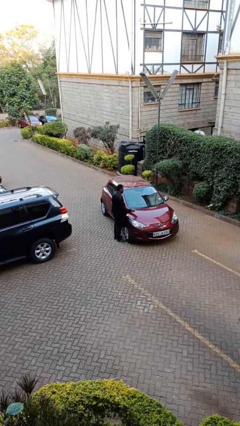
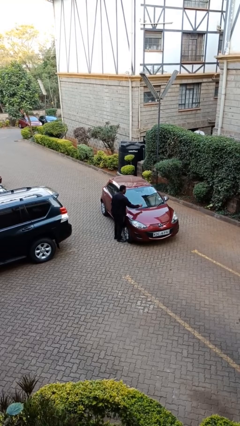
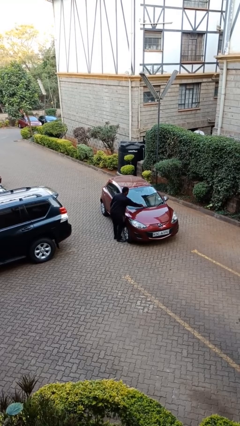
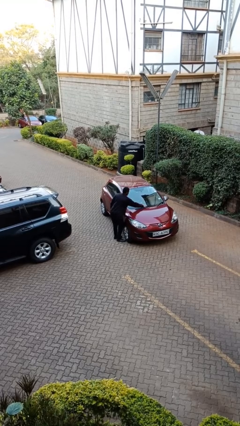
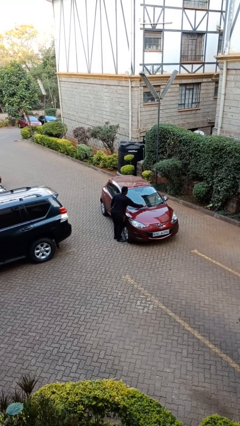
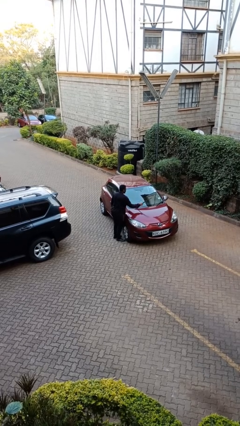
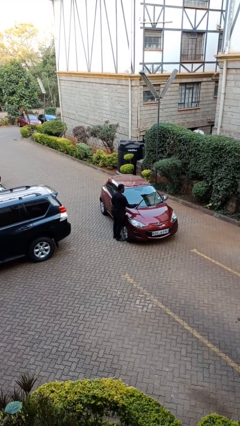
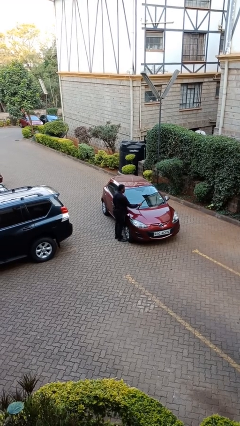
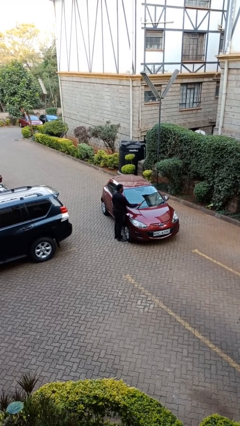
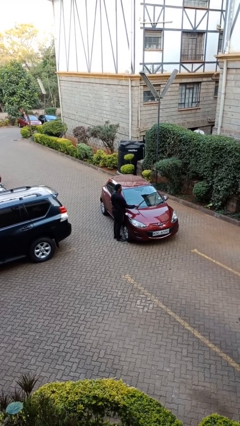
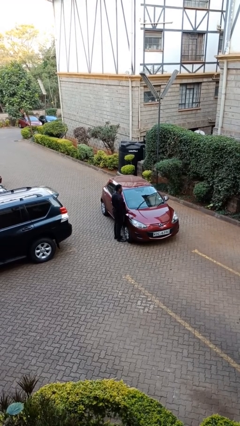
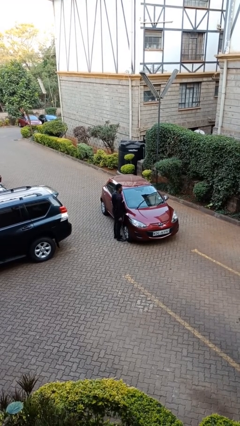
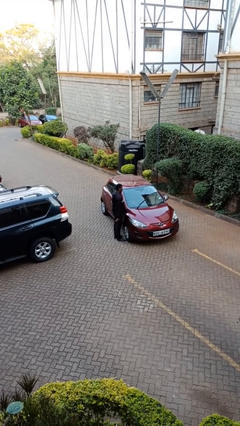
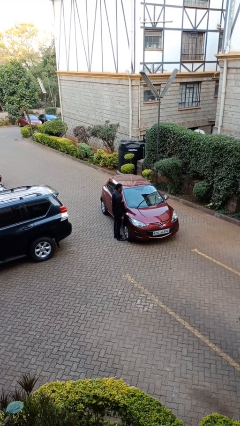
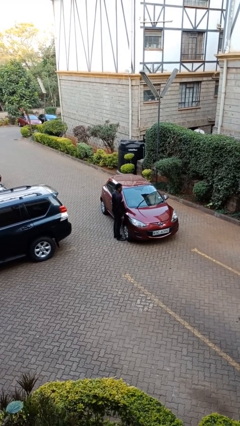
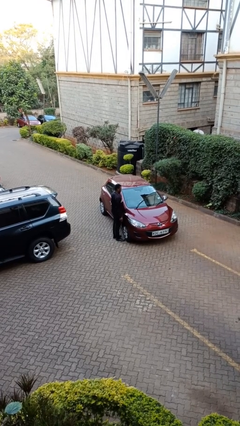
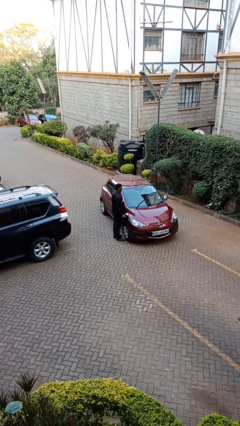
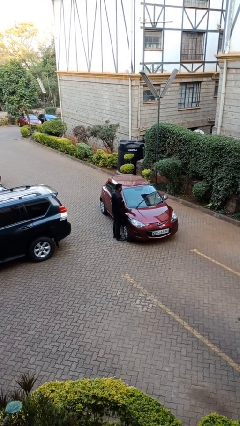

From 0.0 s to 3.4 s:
person flips up car wipers

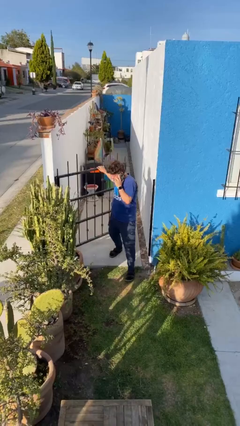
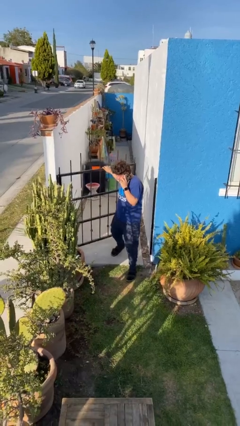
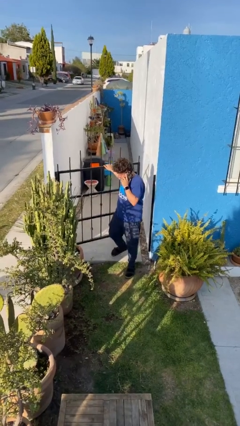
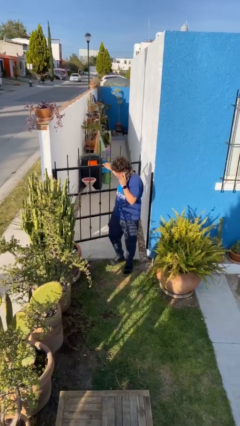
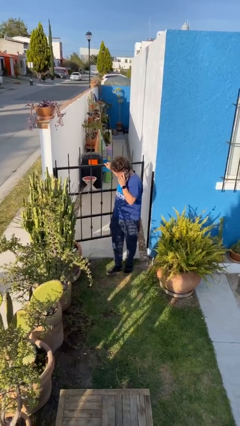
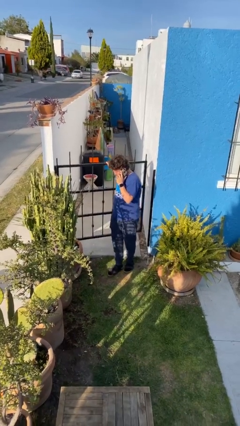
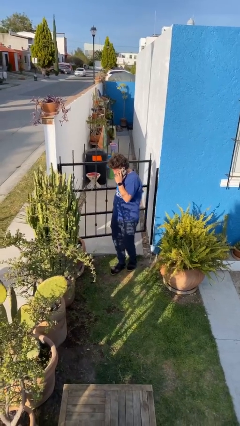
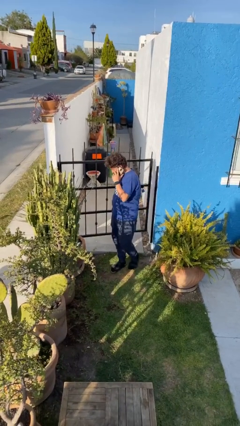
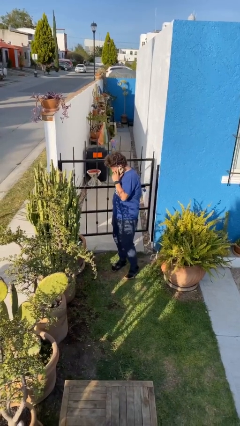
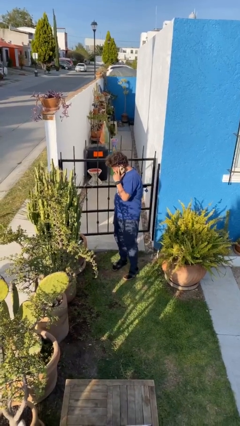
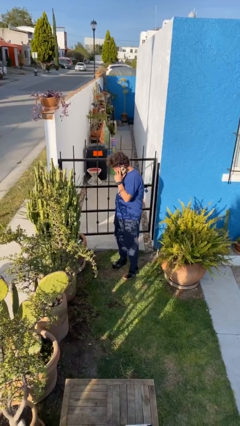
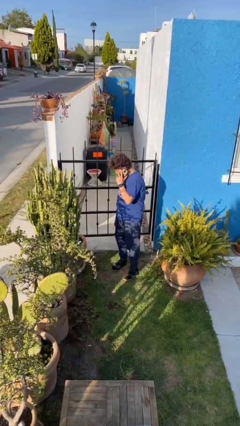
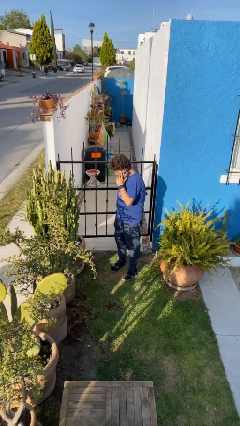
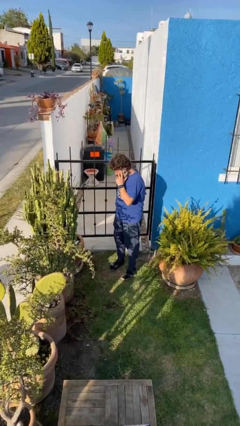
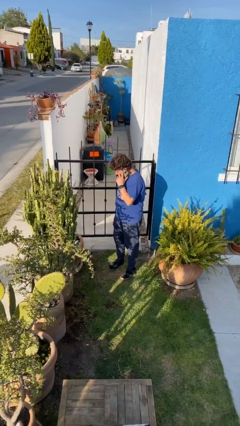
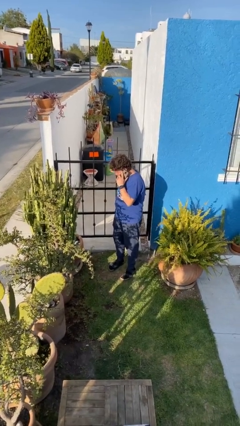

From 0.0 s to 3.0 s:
person closes facility door

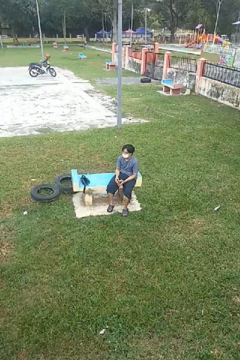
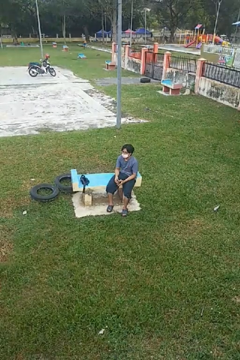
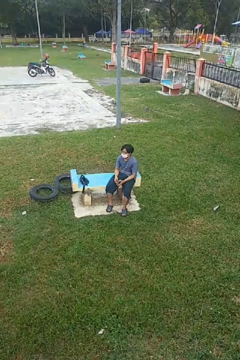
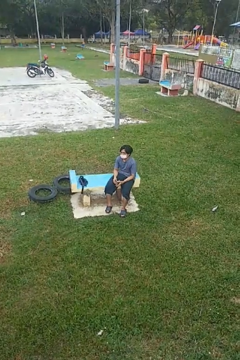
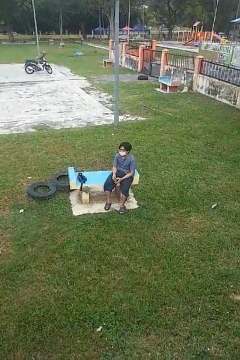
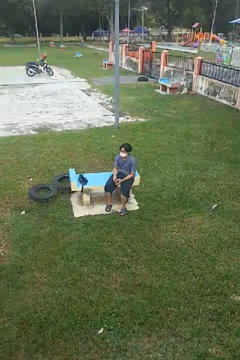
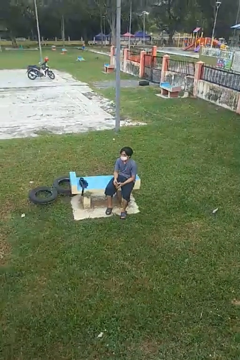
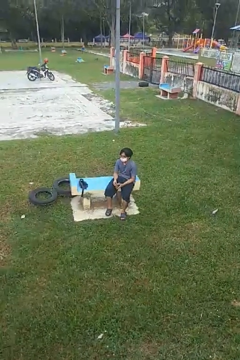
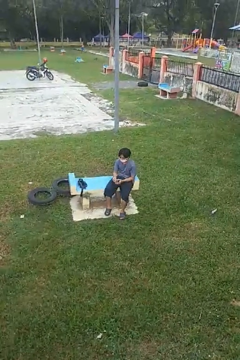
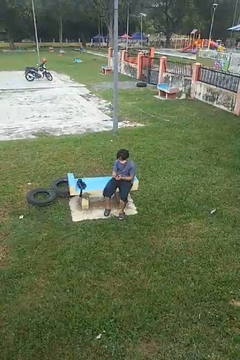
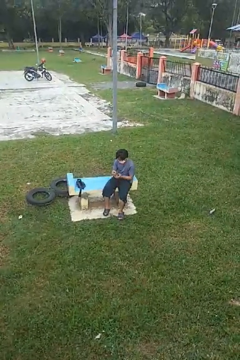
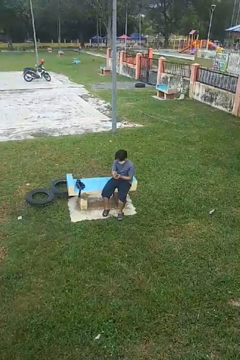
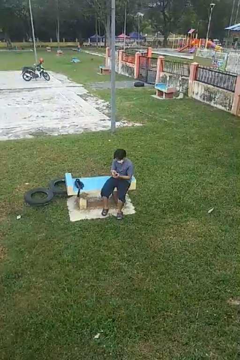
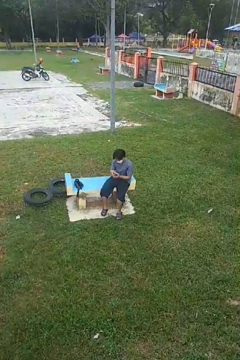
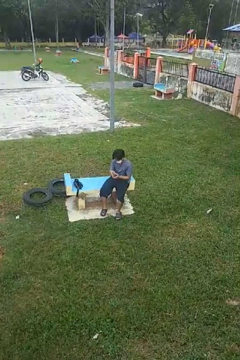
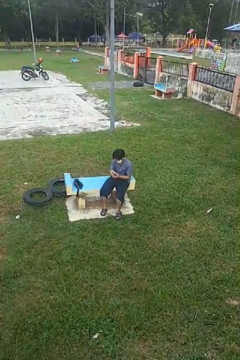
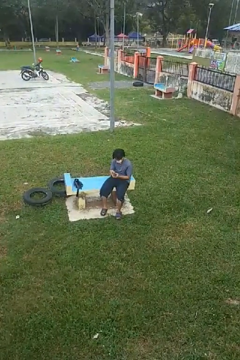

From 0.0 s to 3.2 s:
person searches in purse

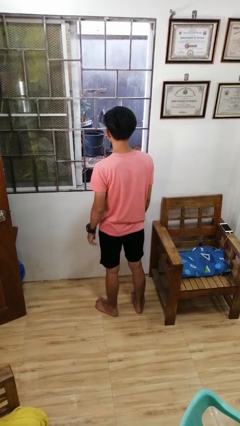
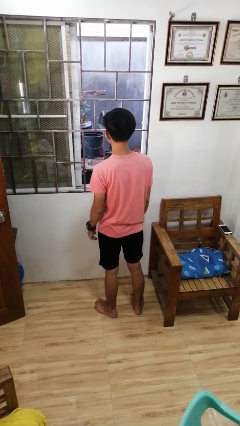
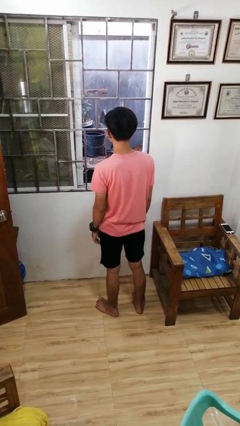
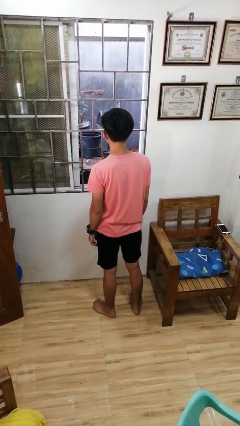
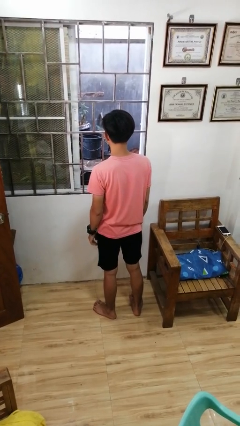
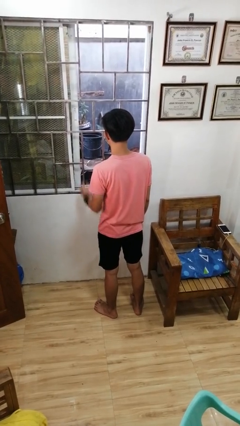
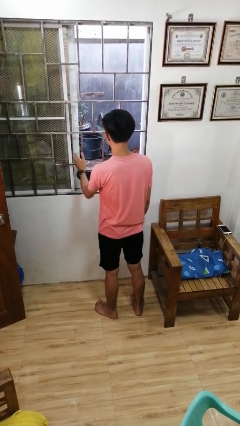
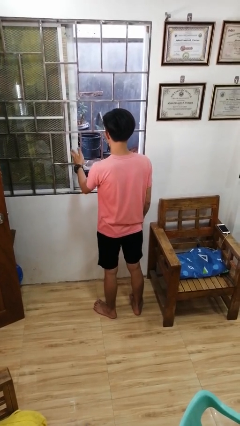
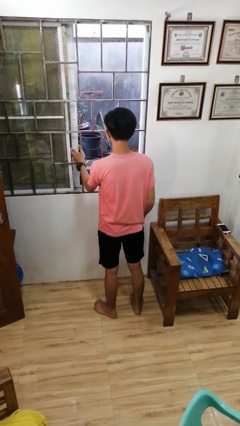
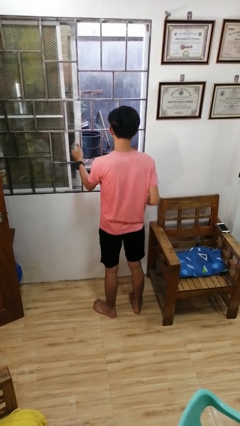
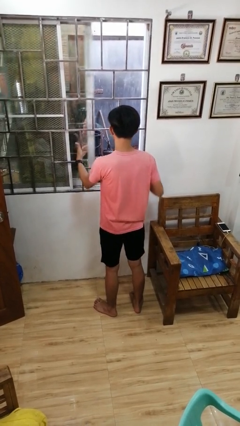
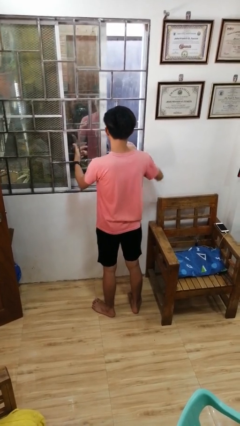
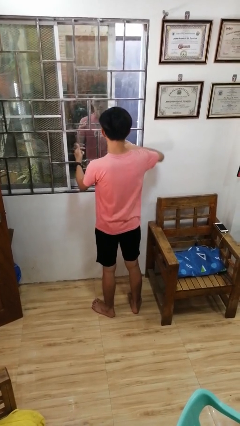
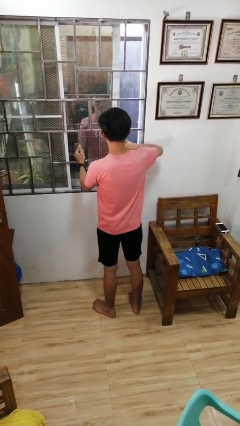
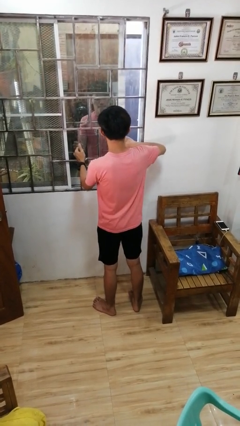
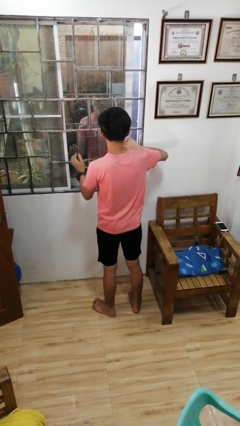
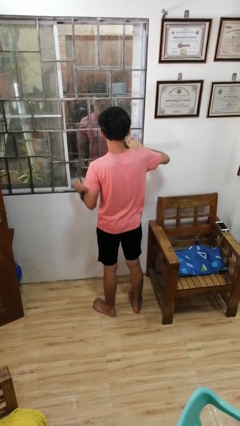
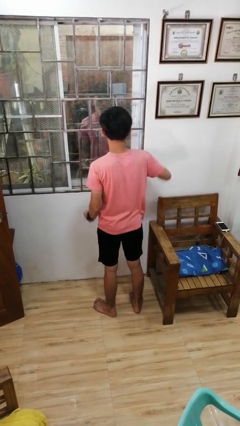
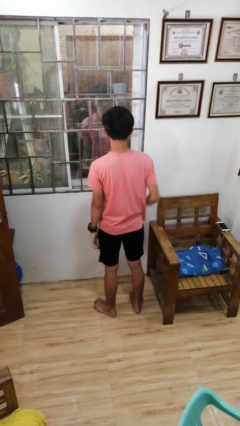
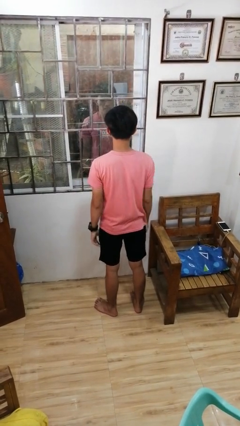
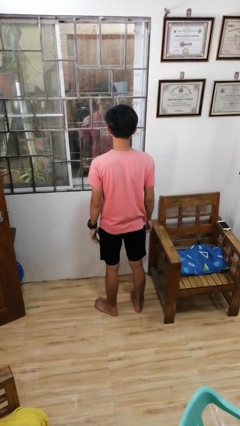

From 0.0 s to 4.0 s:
person closes home window

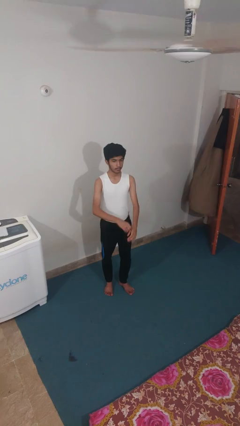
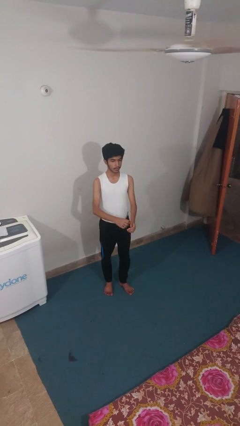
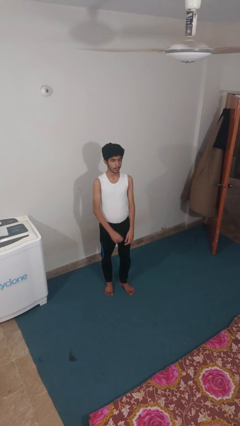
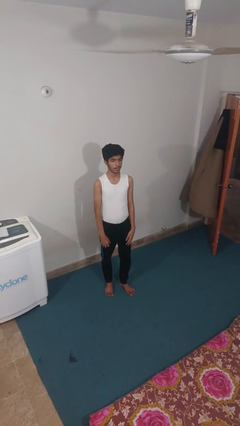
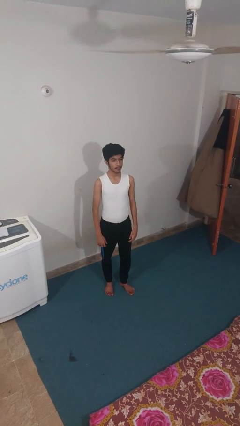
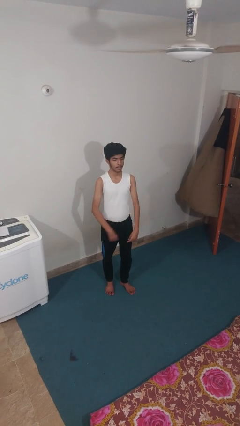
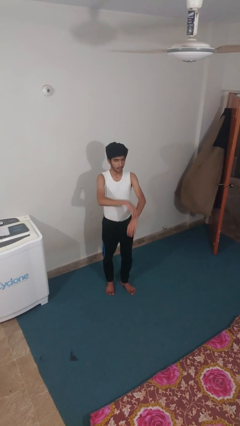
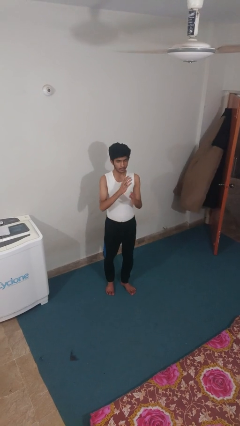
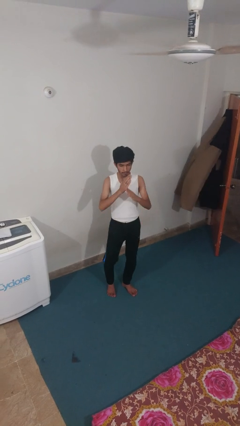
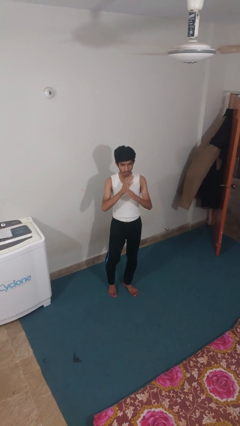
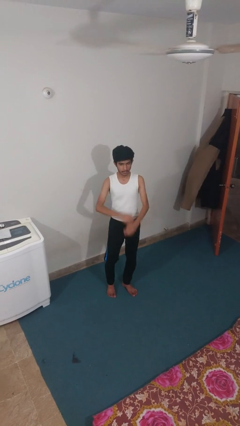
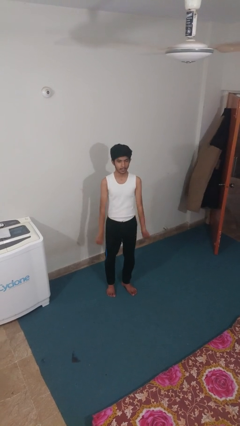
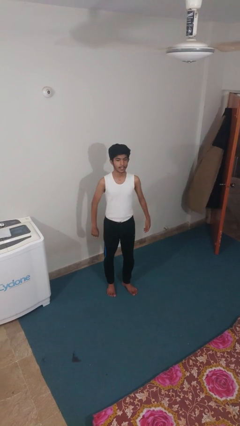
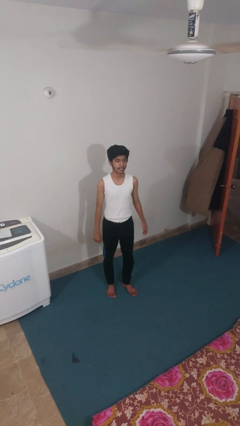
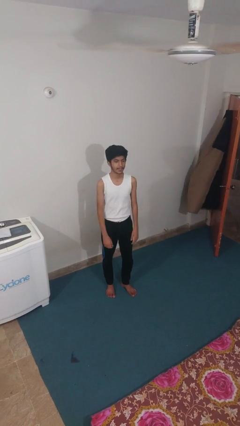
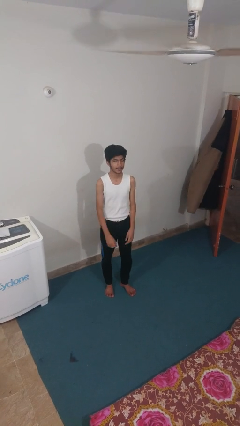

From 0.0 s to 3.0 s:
person karate chop

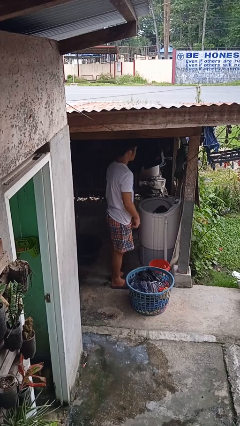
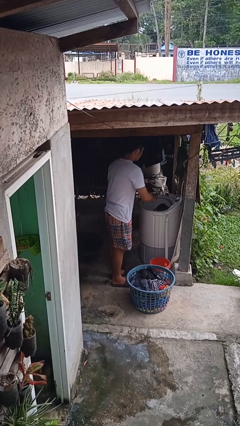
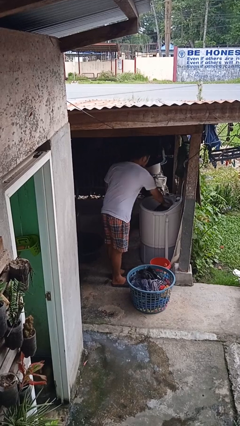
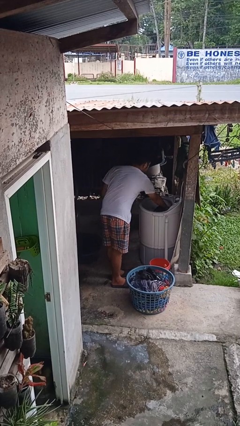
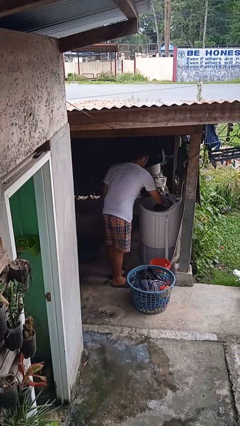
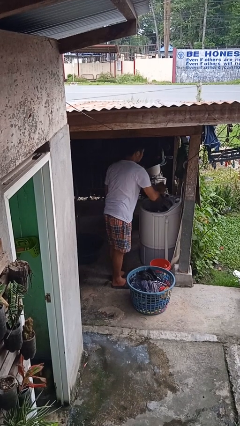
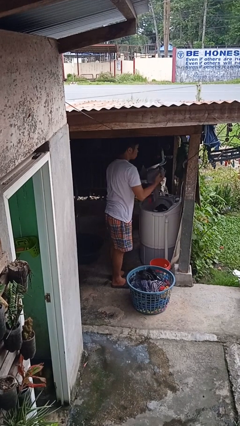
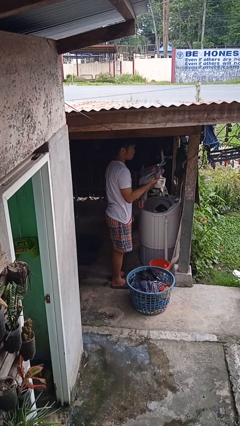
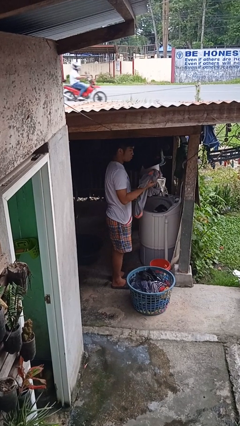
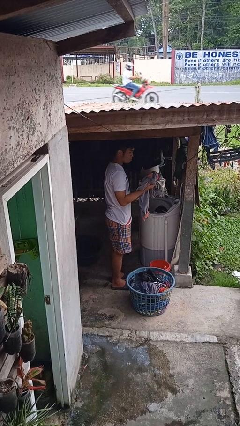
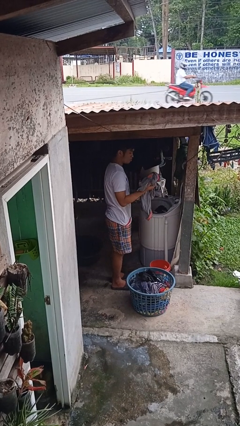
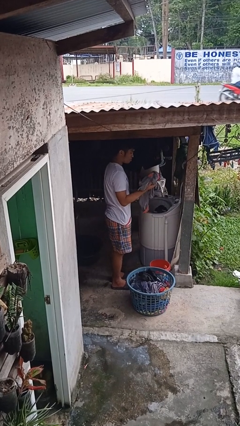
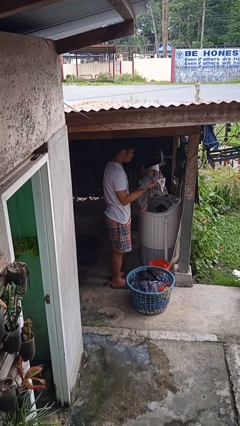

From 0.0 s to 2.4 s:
person unloads clotheswasher
